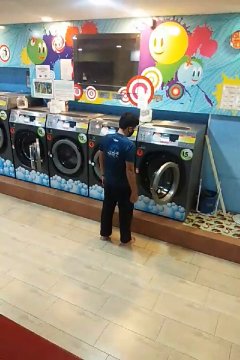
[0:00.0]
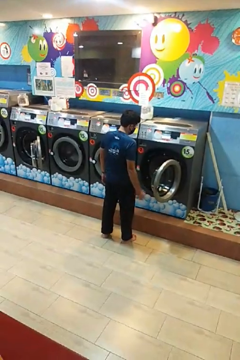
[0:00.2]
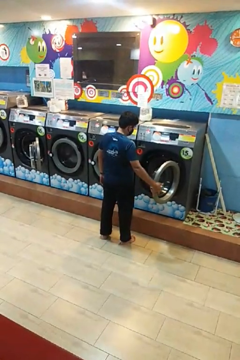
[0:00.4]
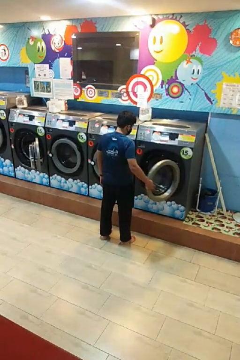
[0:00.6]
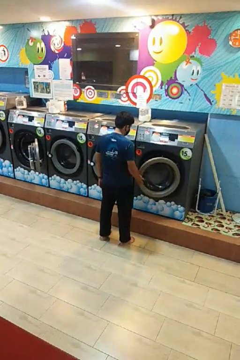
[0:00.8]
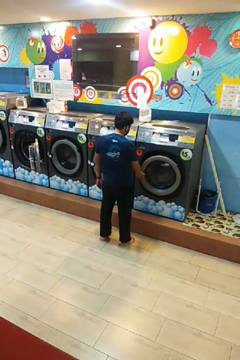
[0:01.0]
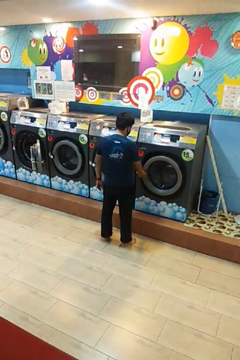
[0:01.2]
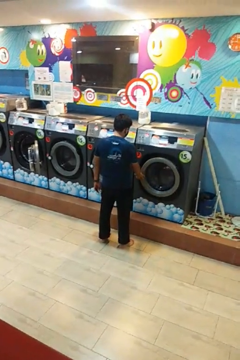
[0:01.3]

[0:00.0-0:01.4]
person closes clothes washer

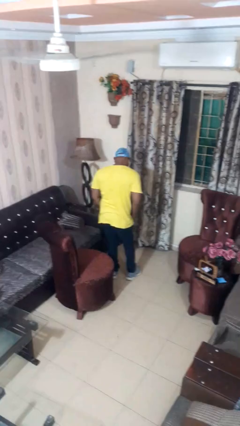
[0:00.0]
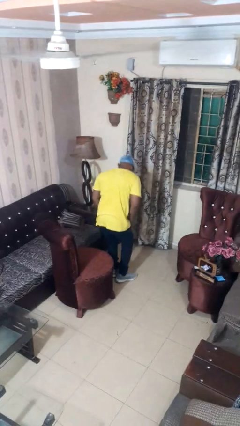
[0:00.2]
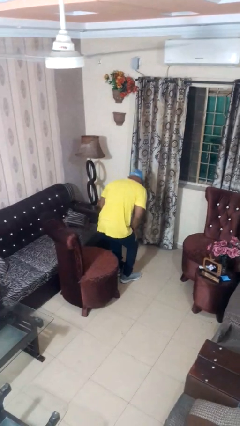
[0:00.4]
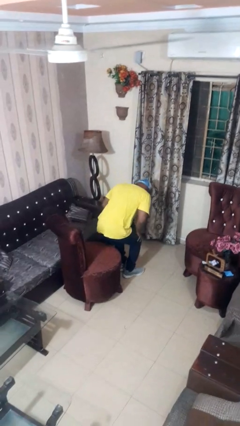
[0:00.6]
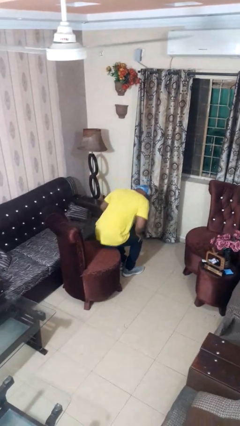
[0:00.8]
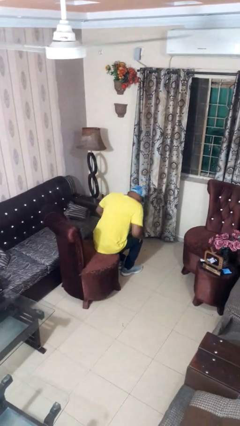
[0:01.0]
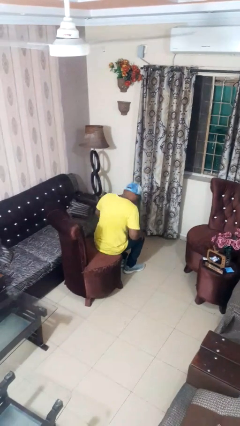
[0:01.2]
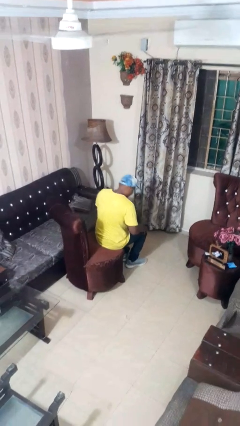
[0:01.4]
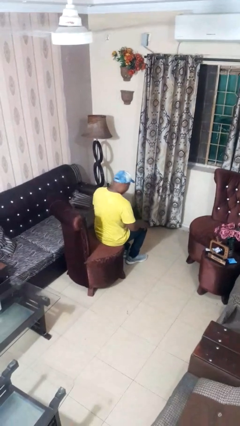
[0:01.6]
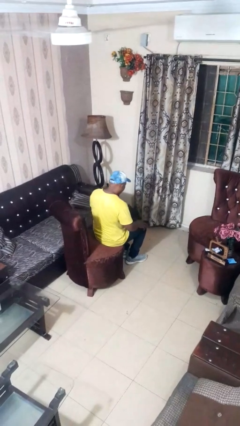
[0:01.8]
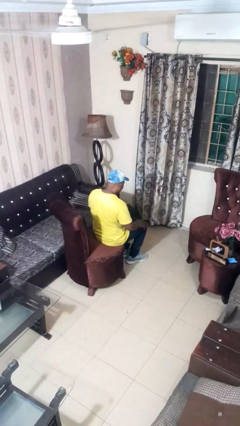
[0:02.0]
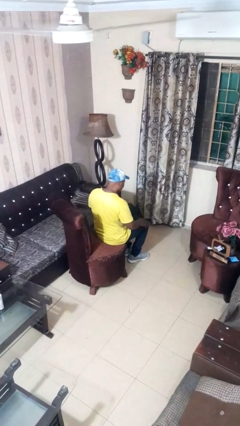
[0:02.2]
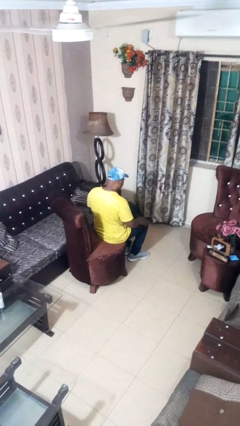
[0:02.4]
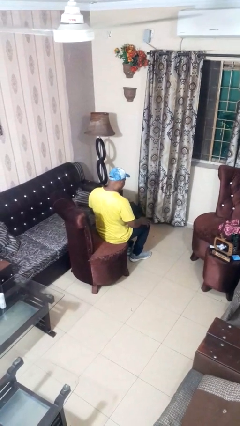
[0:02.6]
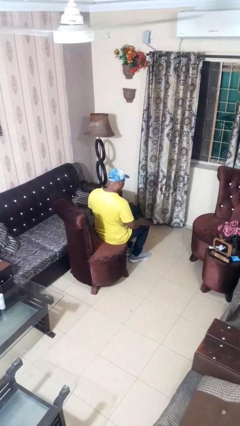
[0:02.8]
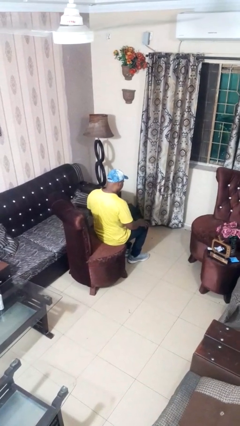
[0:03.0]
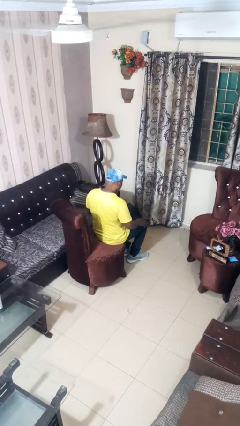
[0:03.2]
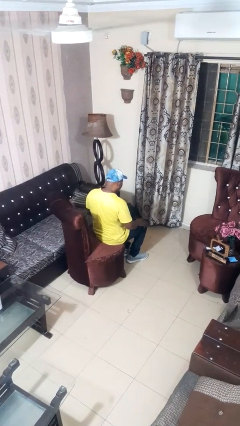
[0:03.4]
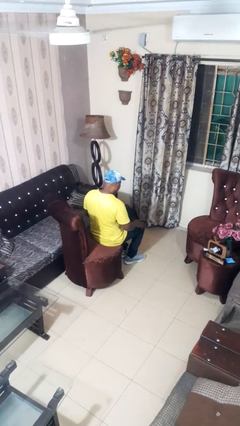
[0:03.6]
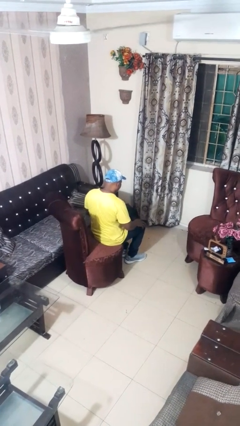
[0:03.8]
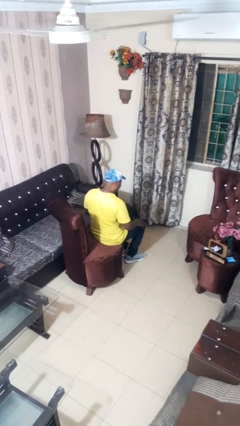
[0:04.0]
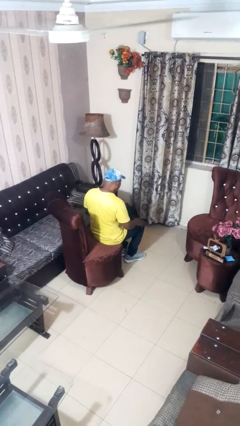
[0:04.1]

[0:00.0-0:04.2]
person sits down

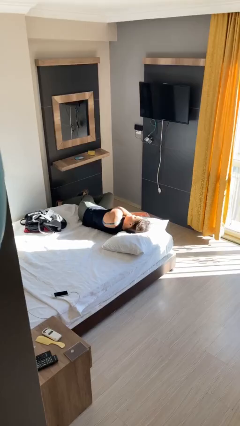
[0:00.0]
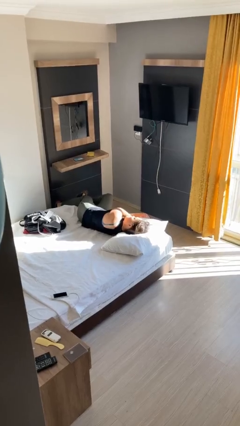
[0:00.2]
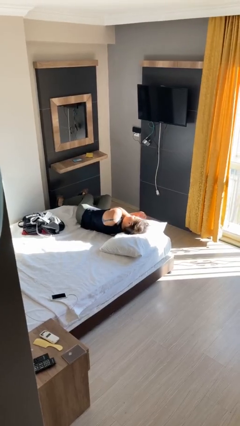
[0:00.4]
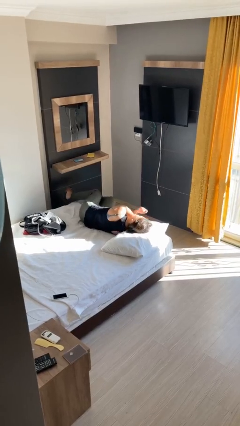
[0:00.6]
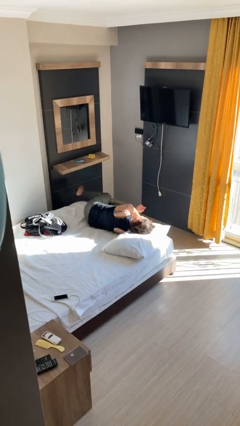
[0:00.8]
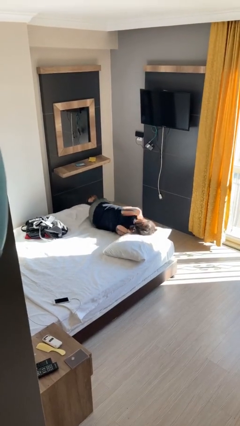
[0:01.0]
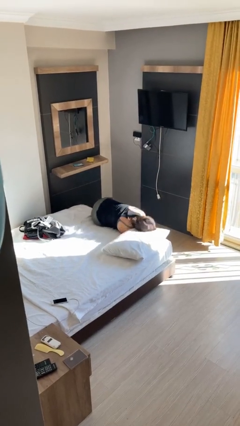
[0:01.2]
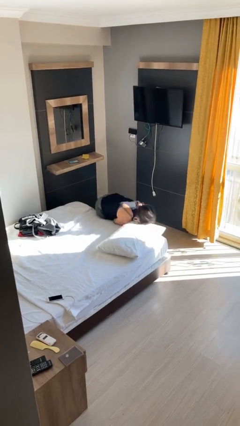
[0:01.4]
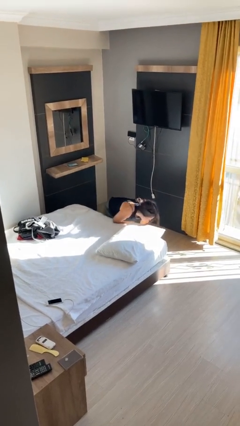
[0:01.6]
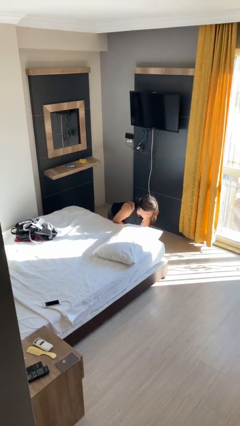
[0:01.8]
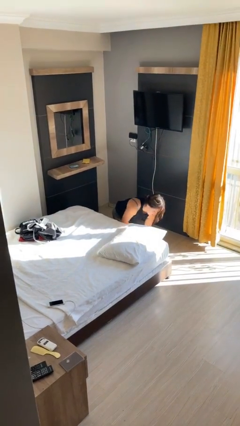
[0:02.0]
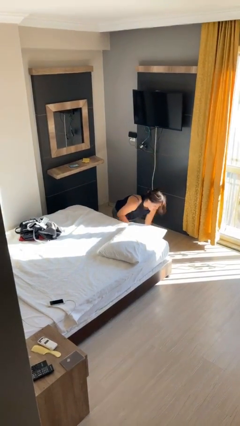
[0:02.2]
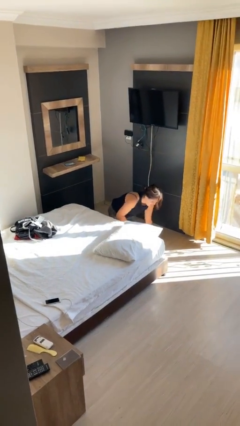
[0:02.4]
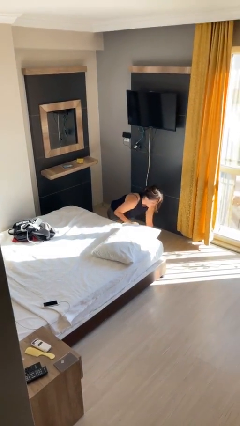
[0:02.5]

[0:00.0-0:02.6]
person falls from bed

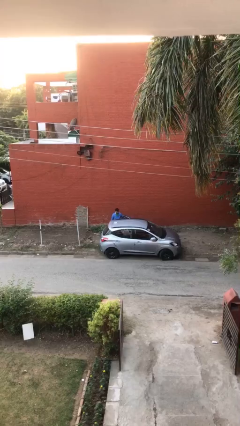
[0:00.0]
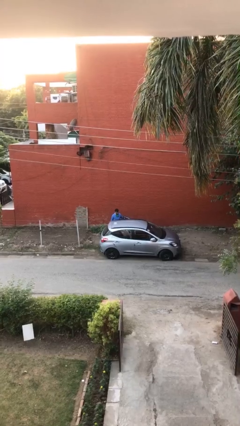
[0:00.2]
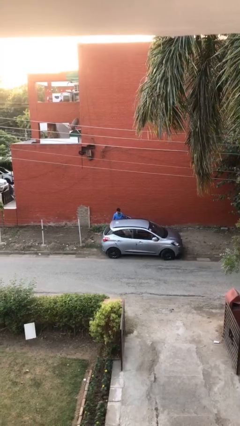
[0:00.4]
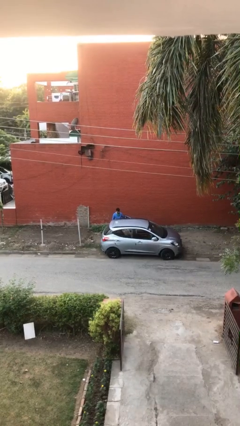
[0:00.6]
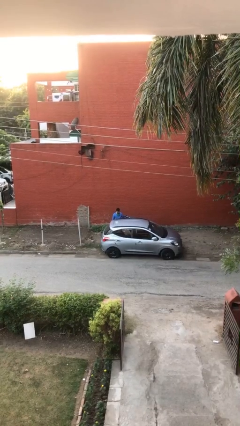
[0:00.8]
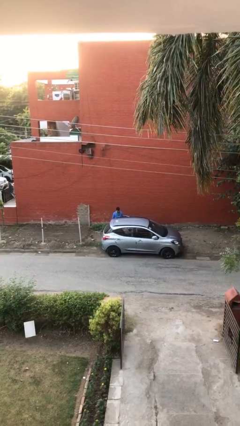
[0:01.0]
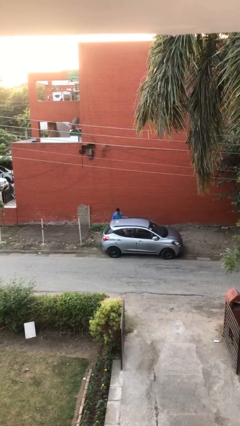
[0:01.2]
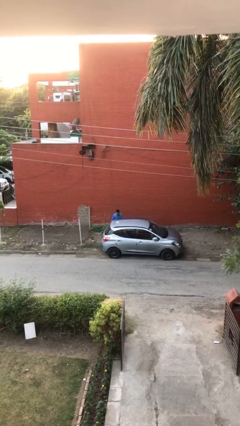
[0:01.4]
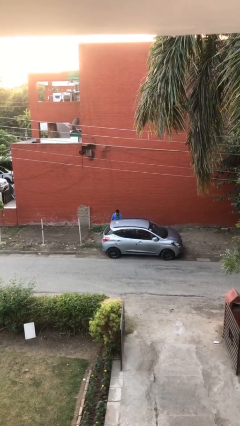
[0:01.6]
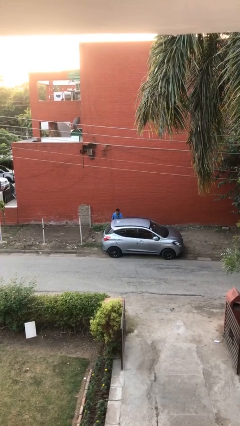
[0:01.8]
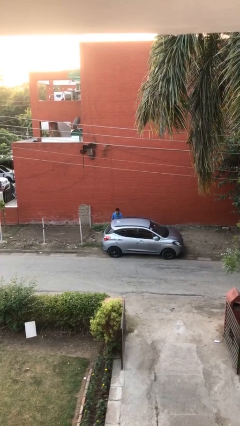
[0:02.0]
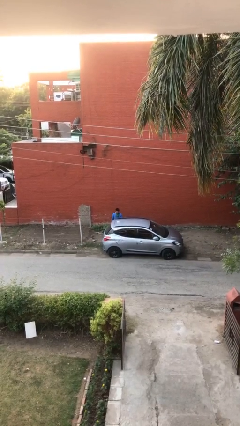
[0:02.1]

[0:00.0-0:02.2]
person closes car door

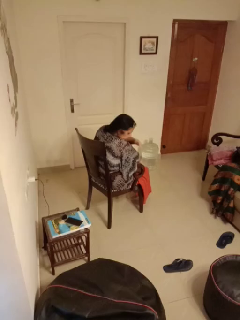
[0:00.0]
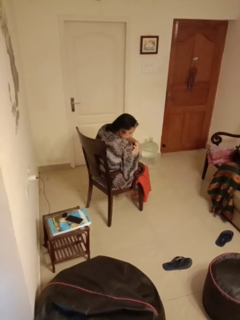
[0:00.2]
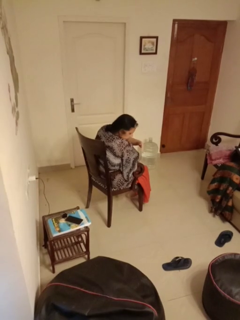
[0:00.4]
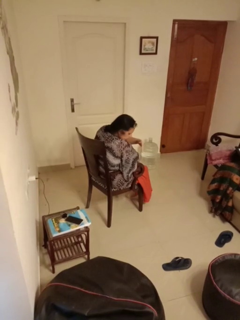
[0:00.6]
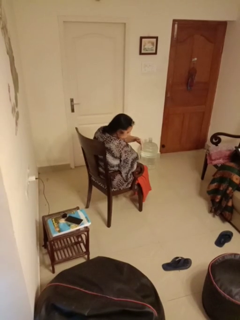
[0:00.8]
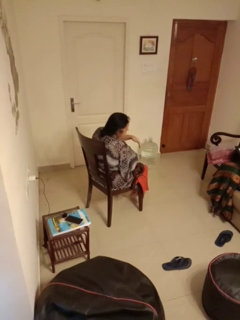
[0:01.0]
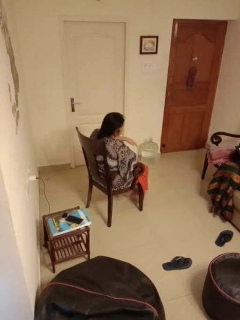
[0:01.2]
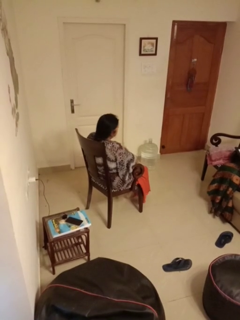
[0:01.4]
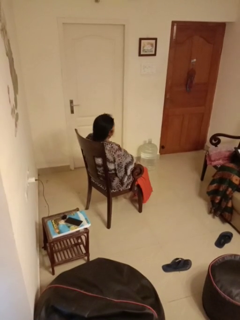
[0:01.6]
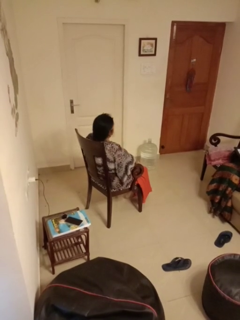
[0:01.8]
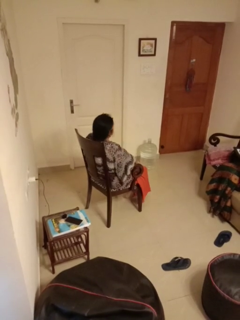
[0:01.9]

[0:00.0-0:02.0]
person swats bug

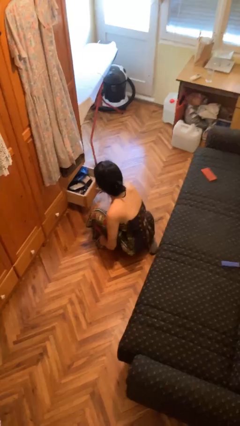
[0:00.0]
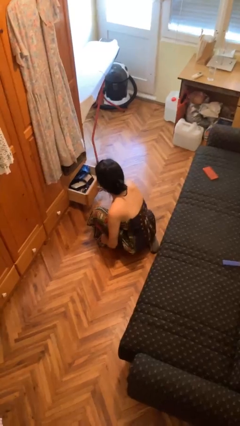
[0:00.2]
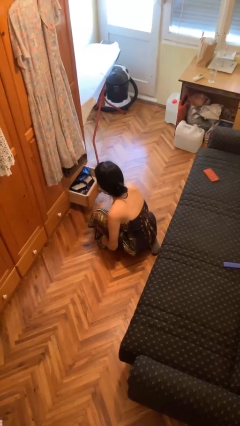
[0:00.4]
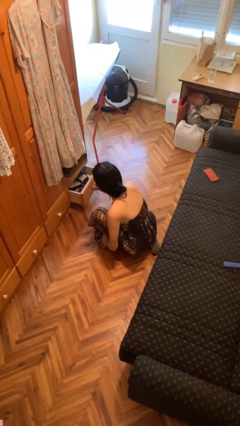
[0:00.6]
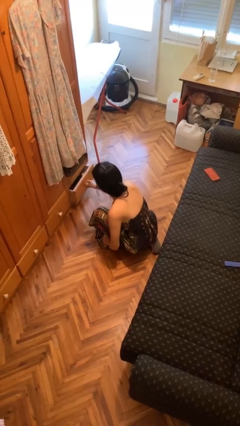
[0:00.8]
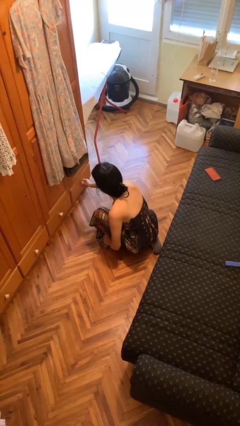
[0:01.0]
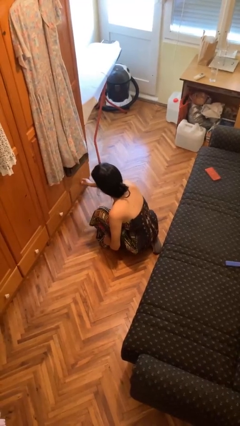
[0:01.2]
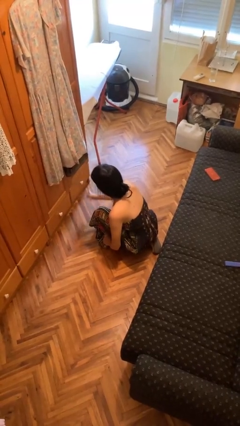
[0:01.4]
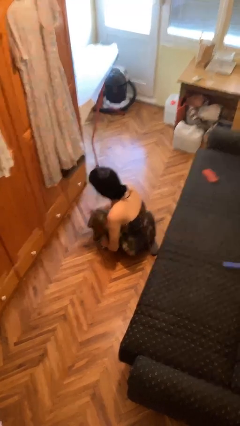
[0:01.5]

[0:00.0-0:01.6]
person closes dresser drawer

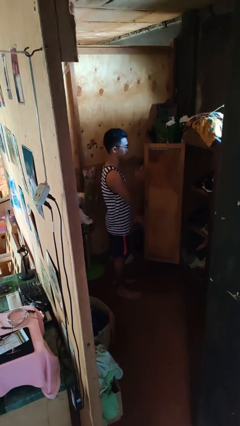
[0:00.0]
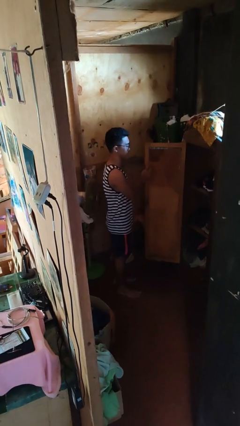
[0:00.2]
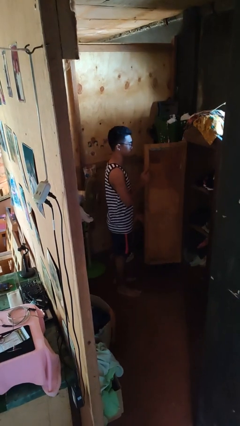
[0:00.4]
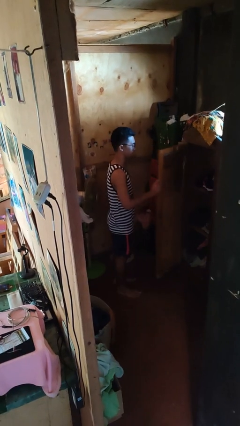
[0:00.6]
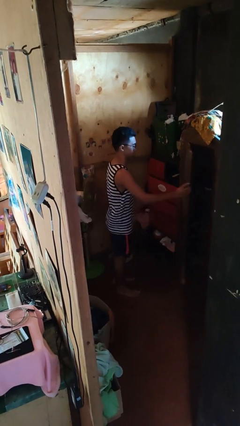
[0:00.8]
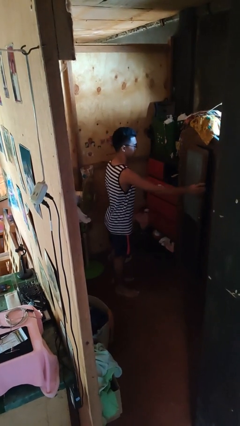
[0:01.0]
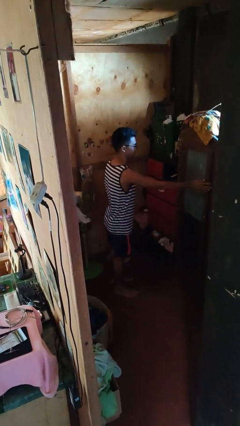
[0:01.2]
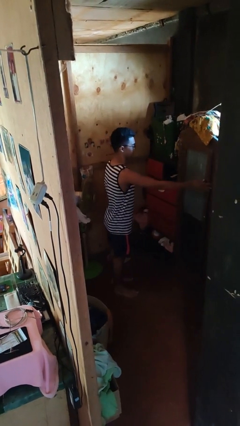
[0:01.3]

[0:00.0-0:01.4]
person closes closet door

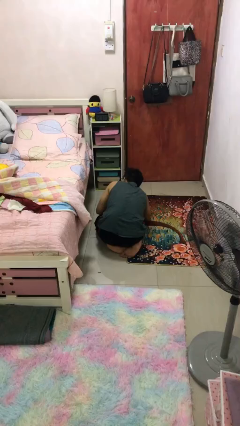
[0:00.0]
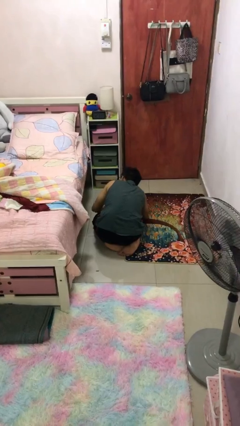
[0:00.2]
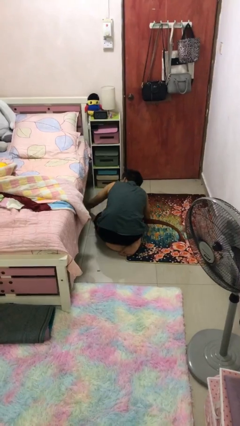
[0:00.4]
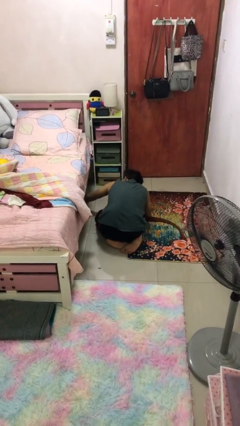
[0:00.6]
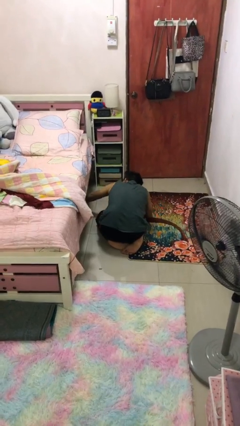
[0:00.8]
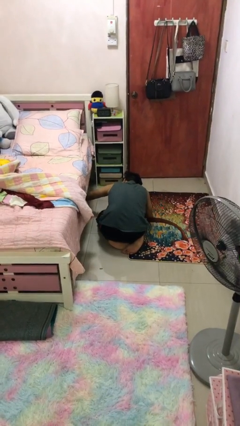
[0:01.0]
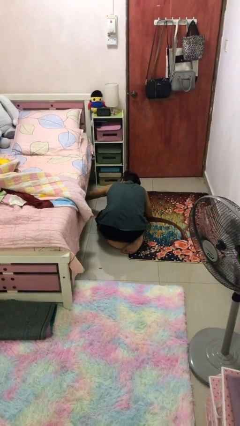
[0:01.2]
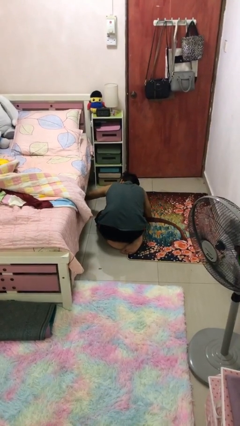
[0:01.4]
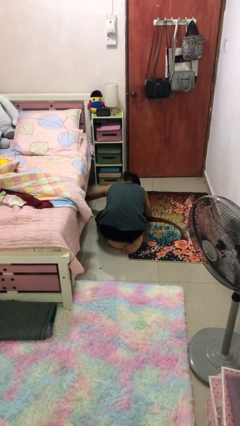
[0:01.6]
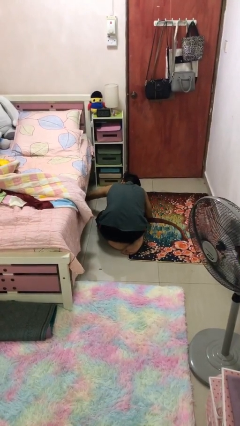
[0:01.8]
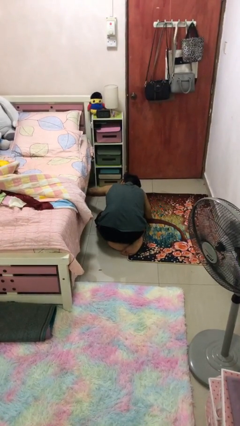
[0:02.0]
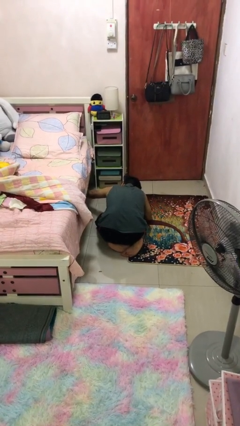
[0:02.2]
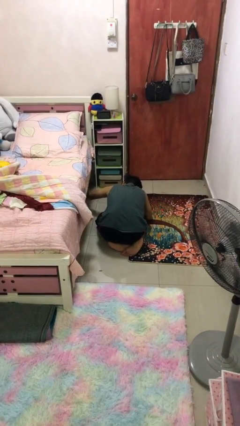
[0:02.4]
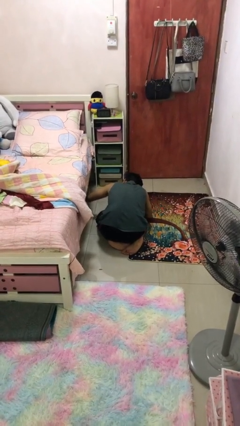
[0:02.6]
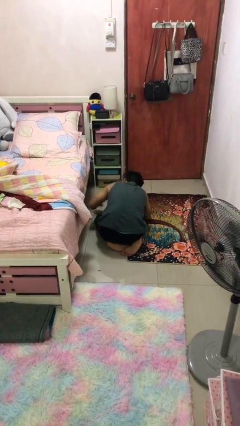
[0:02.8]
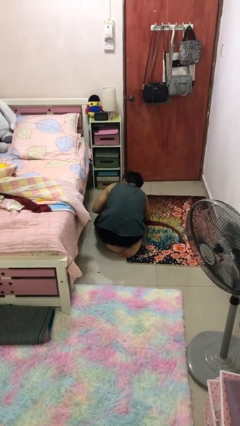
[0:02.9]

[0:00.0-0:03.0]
person searches under bed
